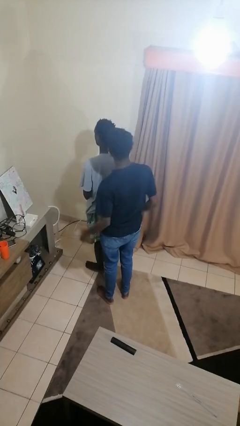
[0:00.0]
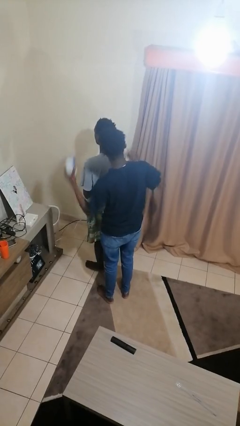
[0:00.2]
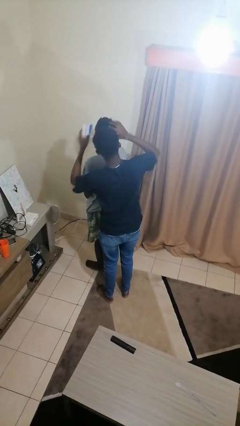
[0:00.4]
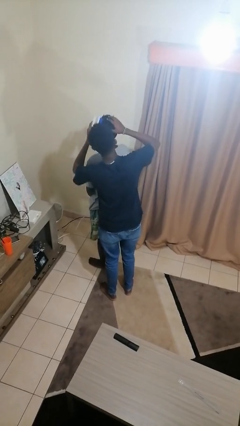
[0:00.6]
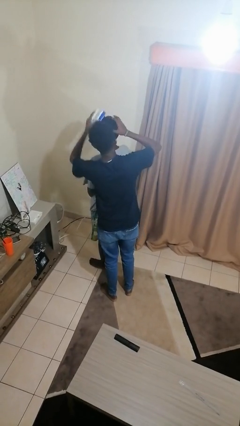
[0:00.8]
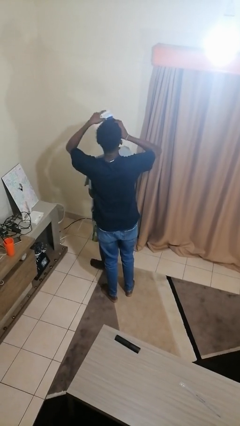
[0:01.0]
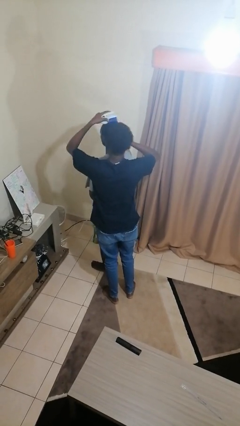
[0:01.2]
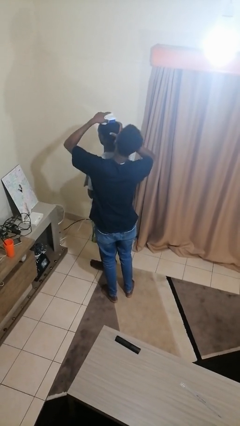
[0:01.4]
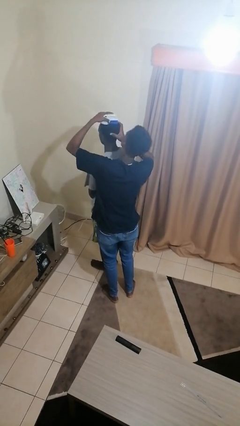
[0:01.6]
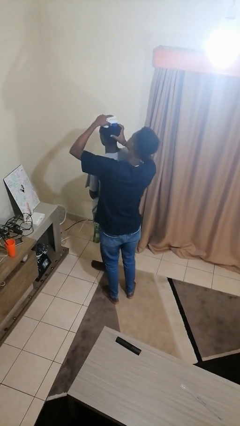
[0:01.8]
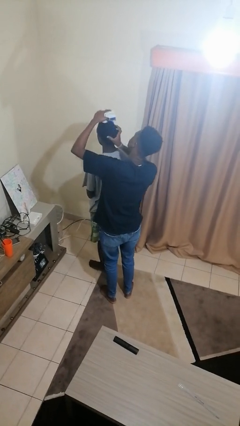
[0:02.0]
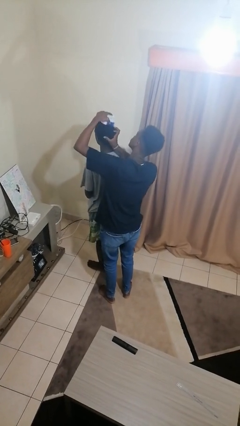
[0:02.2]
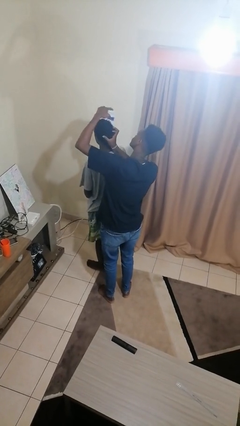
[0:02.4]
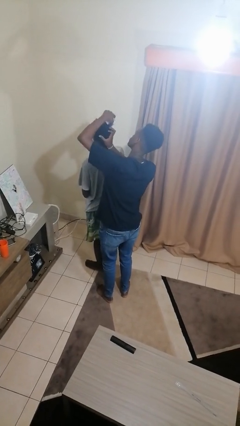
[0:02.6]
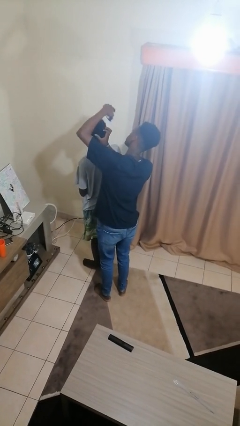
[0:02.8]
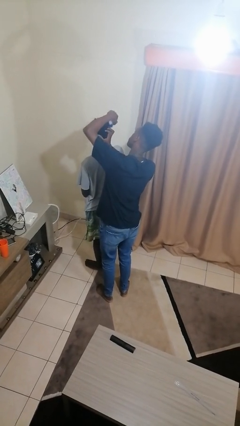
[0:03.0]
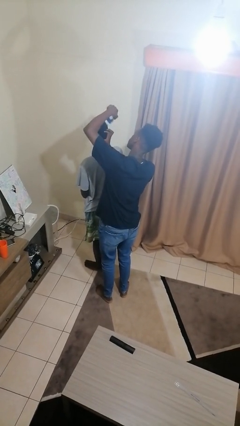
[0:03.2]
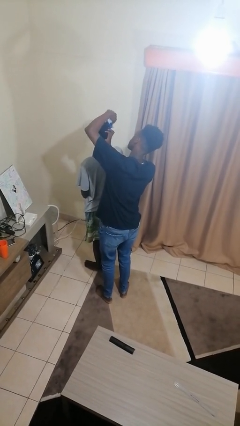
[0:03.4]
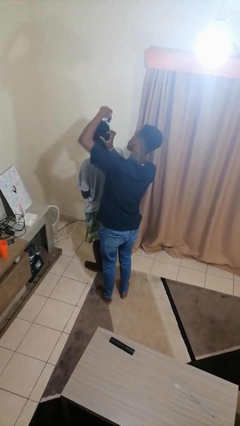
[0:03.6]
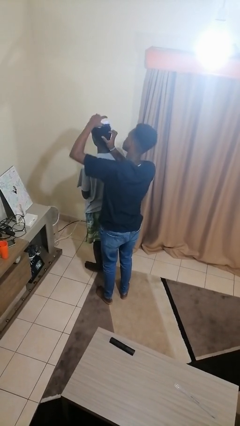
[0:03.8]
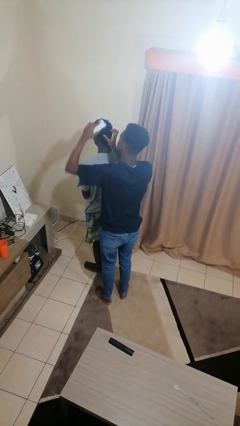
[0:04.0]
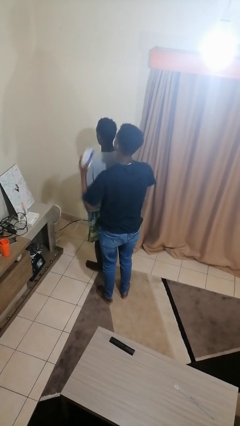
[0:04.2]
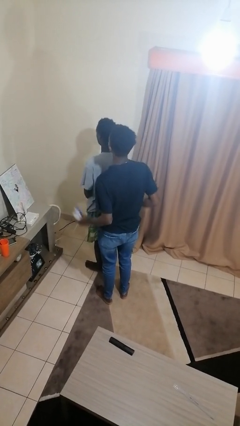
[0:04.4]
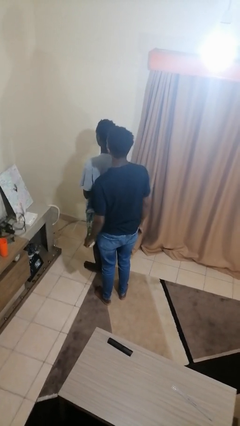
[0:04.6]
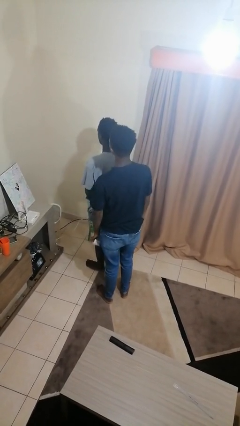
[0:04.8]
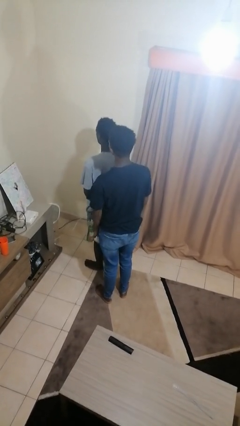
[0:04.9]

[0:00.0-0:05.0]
person brushes hair of person

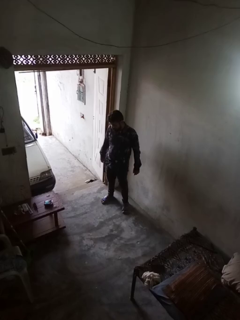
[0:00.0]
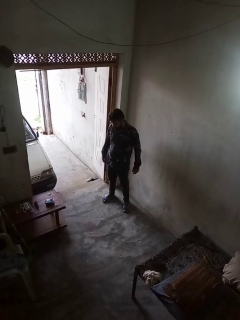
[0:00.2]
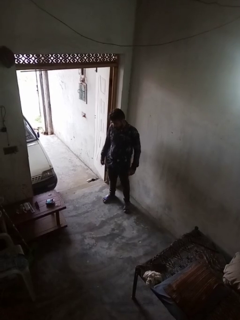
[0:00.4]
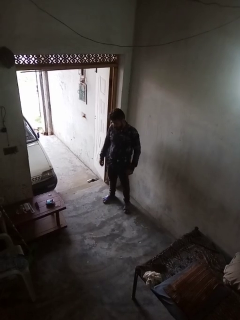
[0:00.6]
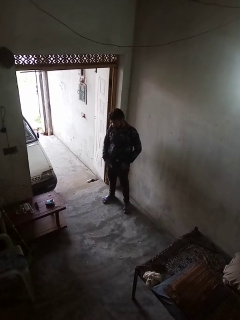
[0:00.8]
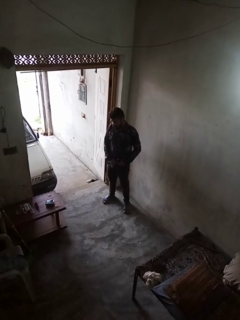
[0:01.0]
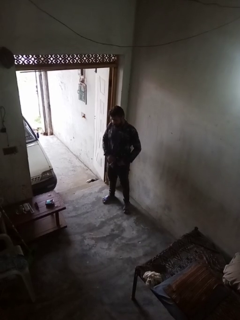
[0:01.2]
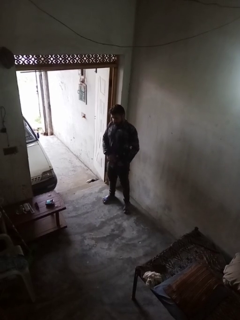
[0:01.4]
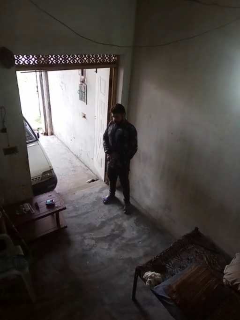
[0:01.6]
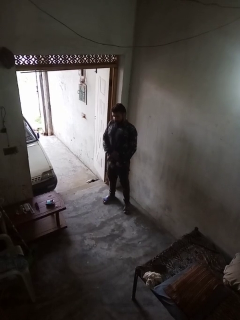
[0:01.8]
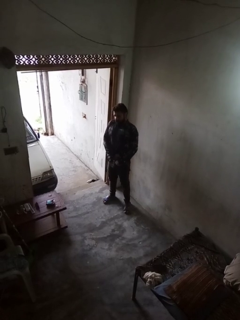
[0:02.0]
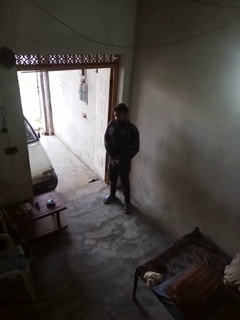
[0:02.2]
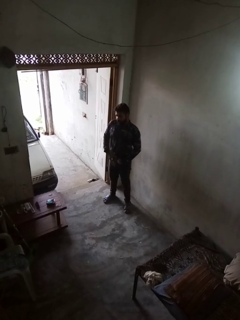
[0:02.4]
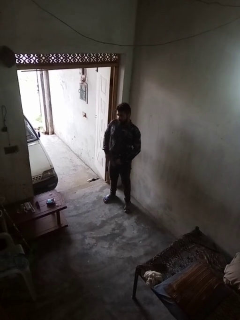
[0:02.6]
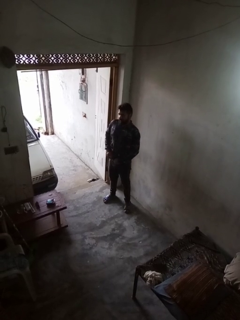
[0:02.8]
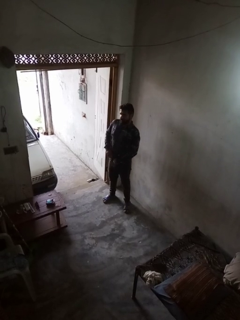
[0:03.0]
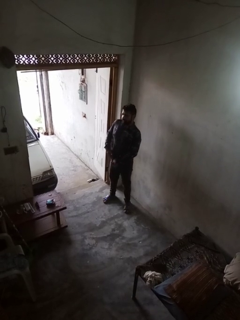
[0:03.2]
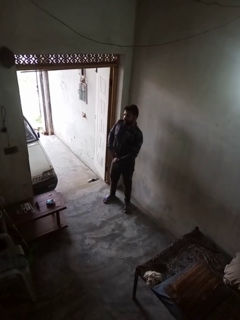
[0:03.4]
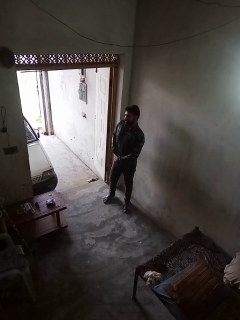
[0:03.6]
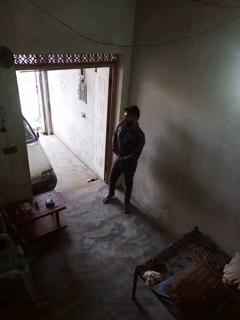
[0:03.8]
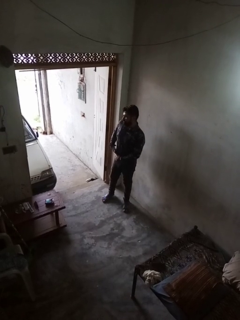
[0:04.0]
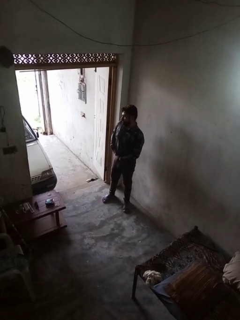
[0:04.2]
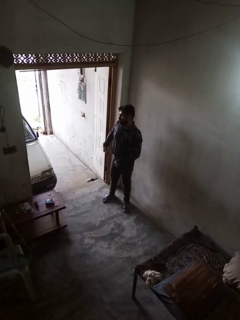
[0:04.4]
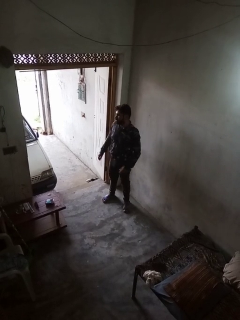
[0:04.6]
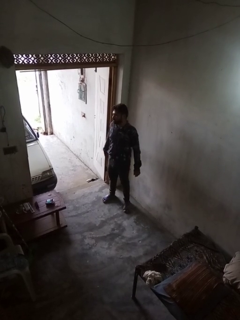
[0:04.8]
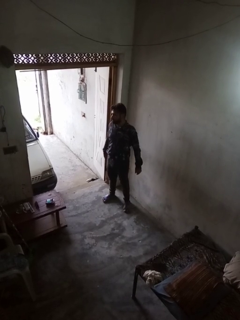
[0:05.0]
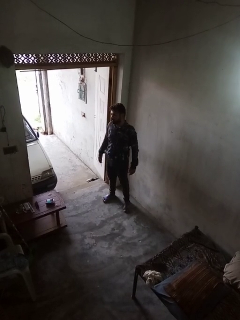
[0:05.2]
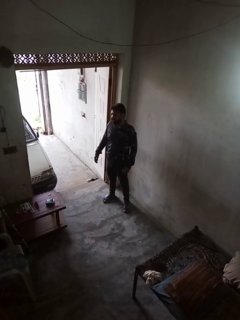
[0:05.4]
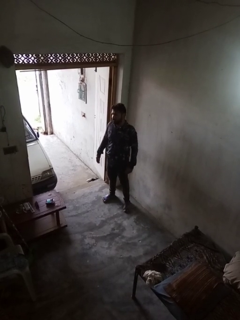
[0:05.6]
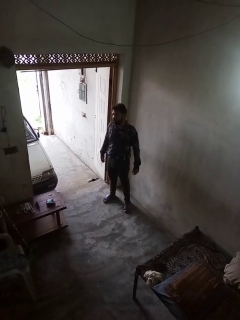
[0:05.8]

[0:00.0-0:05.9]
person tucks in shirt

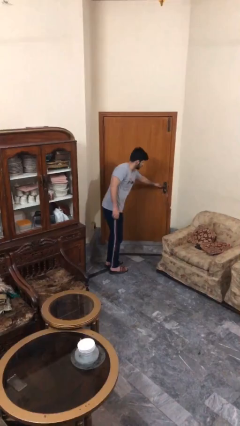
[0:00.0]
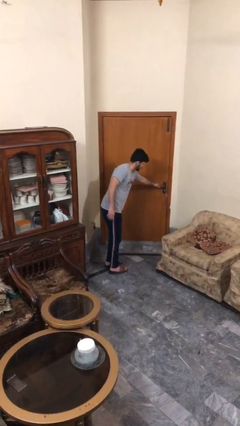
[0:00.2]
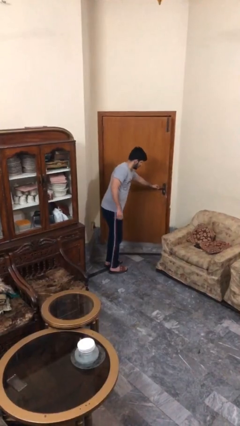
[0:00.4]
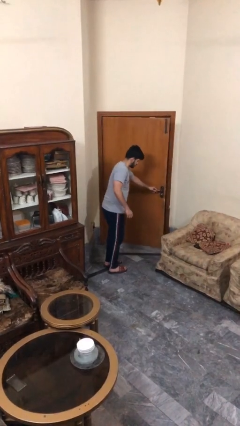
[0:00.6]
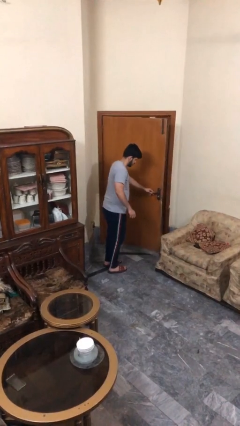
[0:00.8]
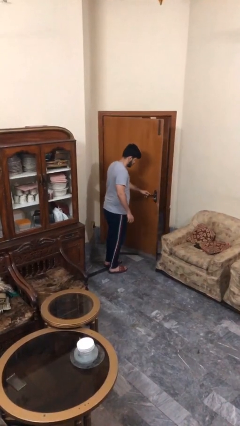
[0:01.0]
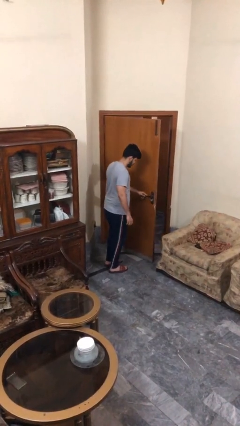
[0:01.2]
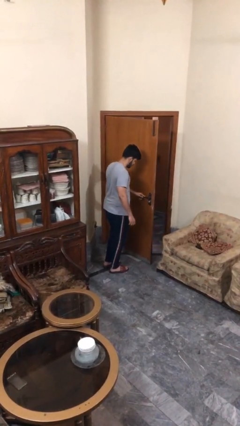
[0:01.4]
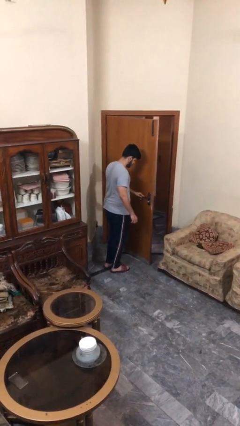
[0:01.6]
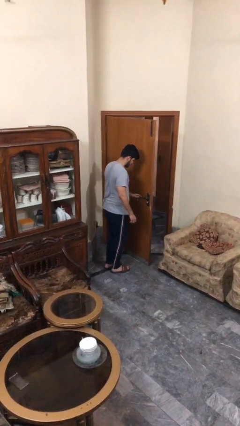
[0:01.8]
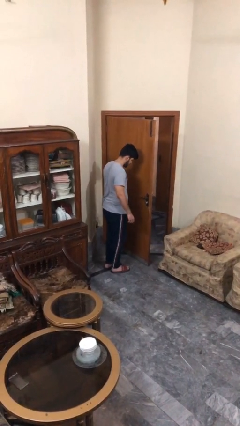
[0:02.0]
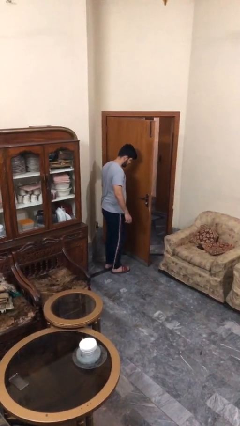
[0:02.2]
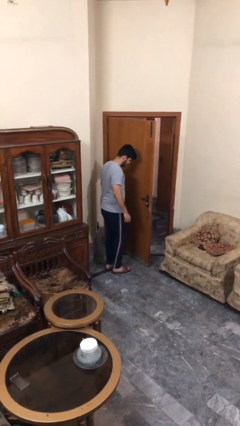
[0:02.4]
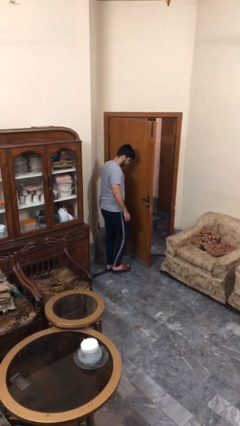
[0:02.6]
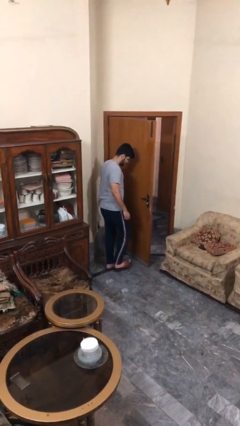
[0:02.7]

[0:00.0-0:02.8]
person opens facility door

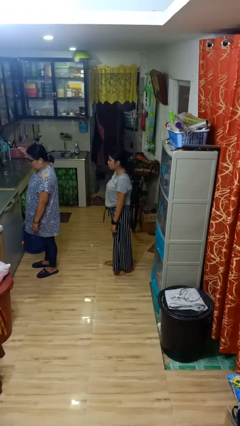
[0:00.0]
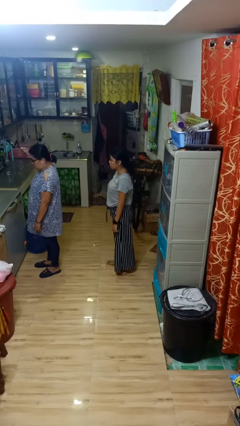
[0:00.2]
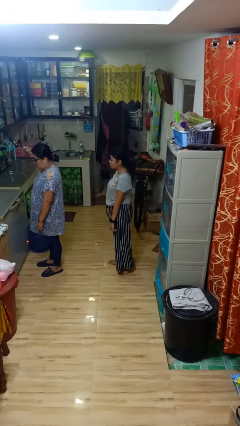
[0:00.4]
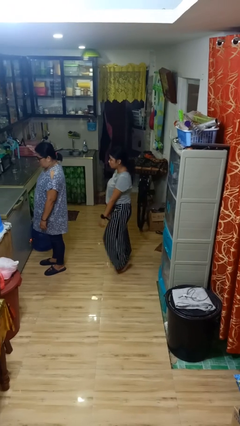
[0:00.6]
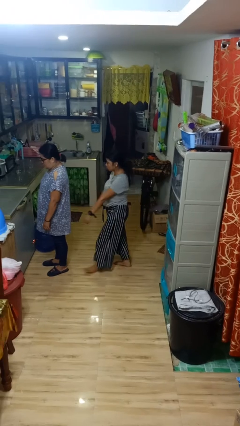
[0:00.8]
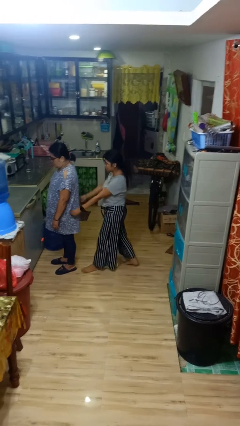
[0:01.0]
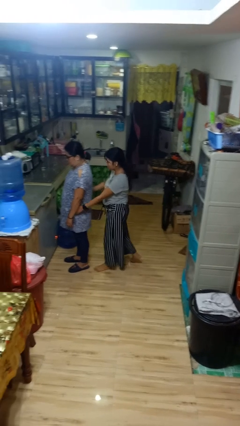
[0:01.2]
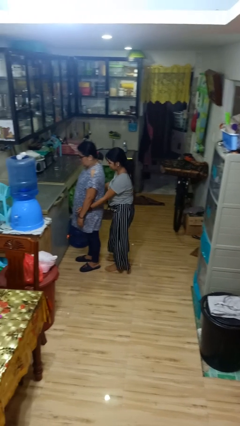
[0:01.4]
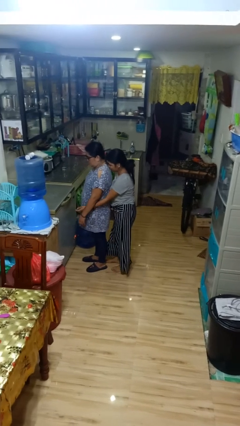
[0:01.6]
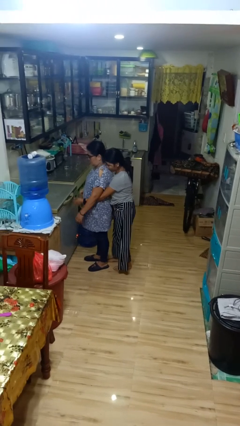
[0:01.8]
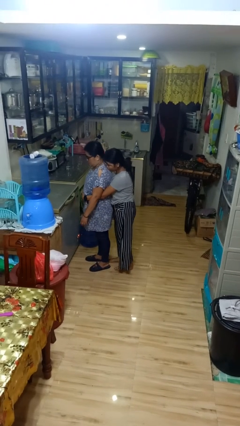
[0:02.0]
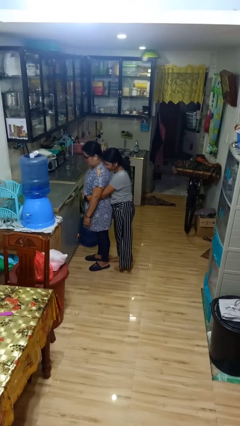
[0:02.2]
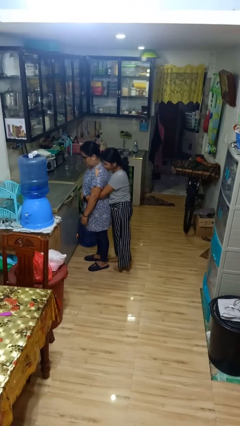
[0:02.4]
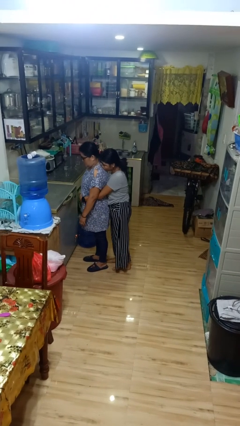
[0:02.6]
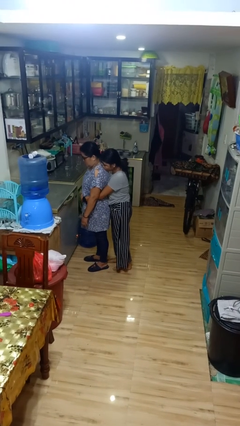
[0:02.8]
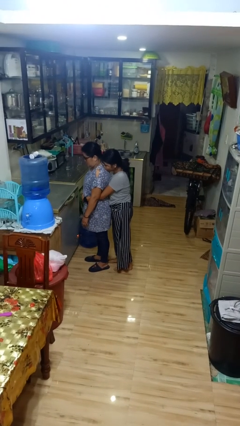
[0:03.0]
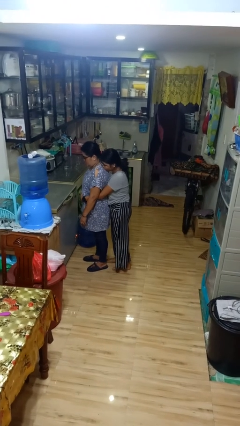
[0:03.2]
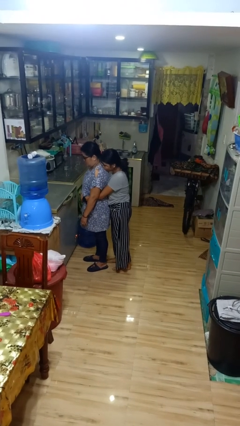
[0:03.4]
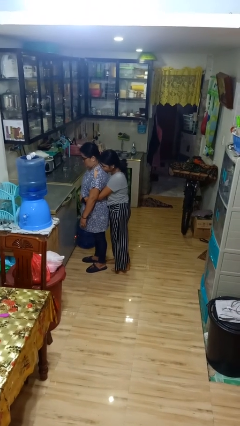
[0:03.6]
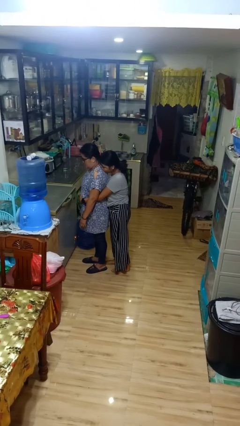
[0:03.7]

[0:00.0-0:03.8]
person hugs person from behind

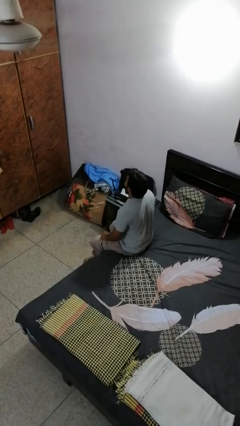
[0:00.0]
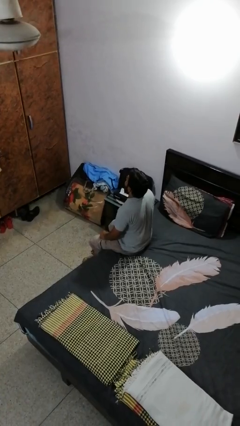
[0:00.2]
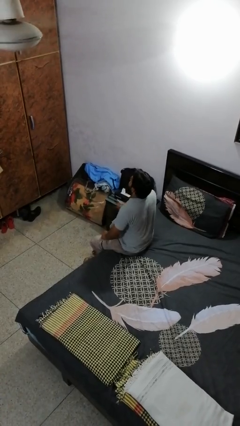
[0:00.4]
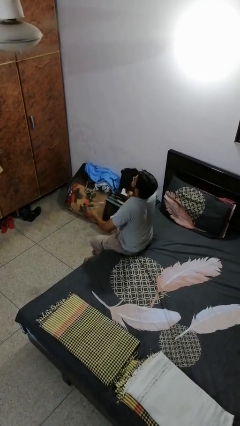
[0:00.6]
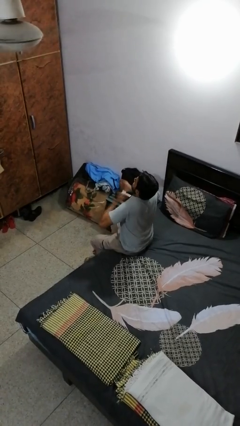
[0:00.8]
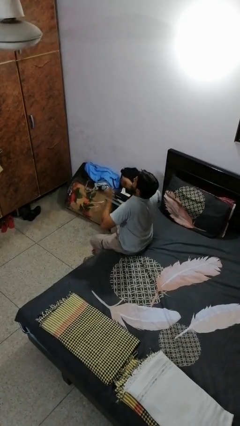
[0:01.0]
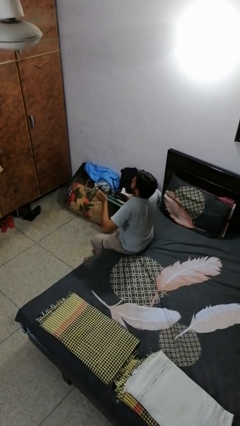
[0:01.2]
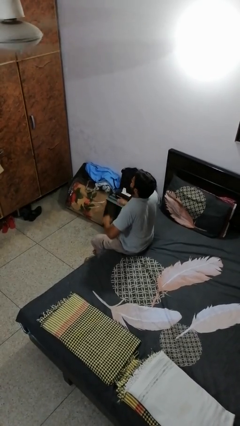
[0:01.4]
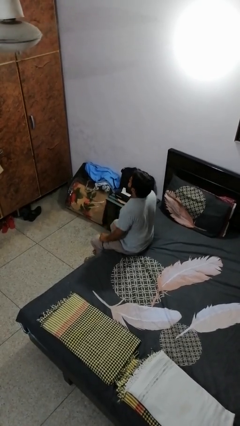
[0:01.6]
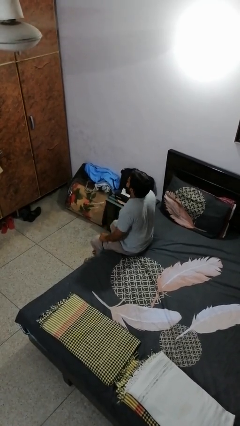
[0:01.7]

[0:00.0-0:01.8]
person drums on chest
